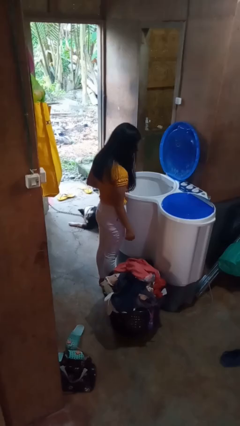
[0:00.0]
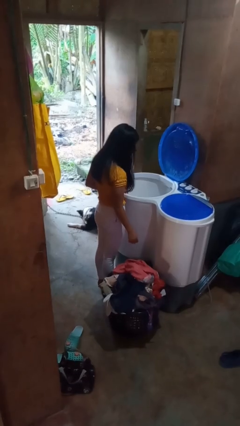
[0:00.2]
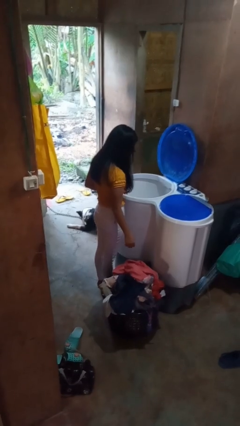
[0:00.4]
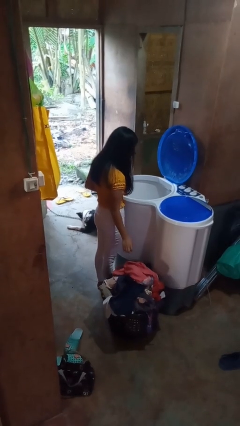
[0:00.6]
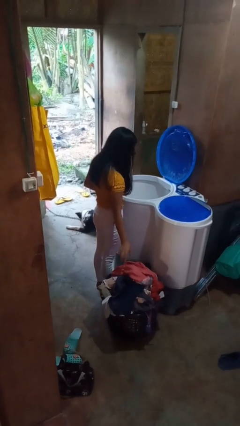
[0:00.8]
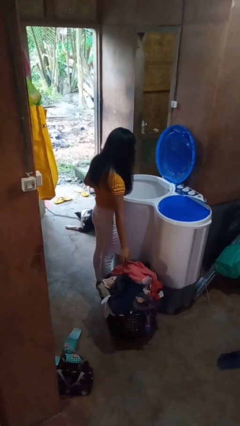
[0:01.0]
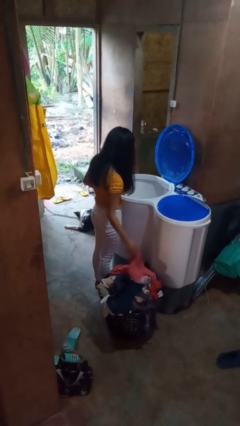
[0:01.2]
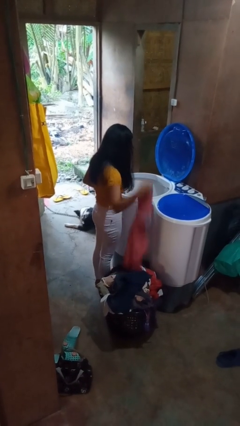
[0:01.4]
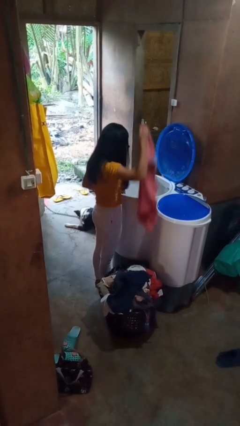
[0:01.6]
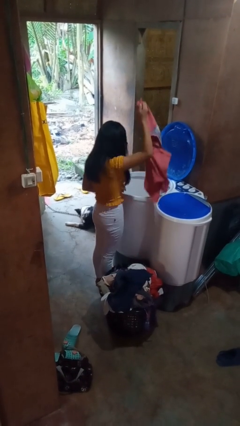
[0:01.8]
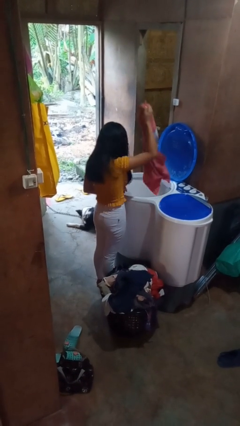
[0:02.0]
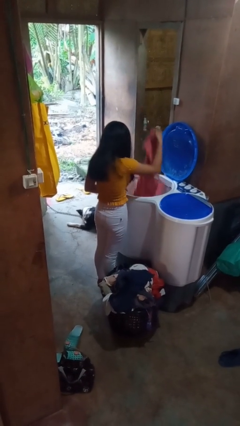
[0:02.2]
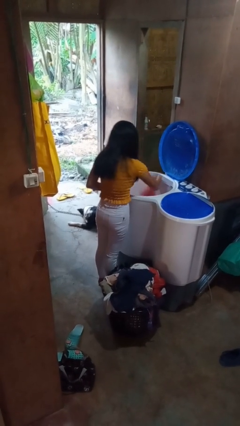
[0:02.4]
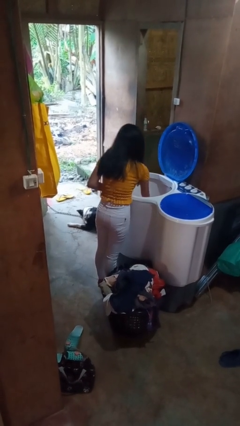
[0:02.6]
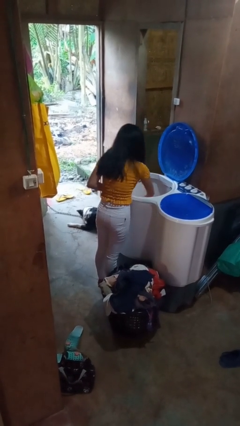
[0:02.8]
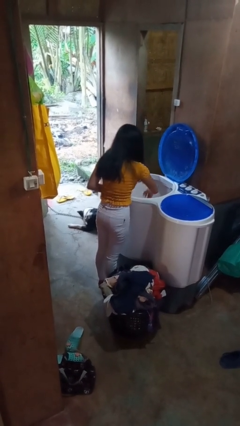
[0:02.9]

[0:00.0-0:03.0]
person loads clotheswasher

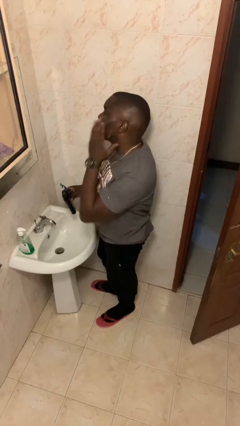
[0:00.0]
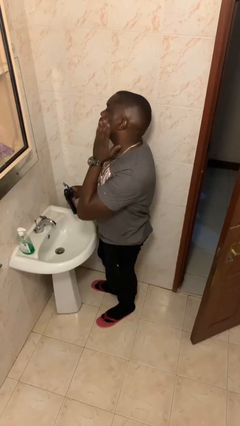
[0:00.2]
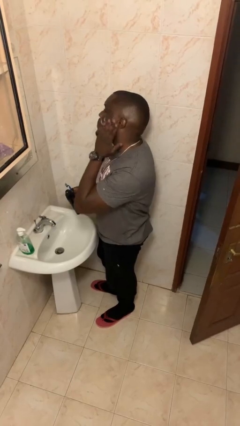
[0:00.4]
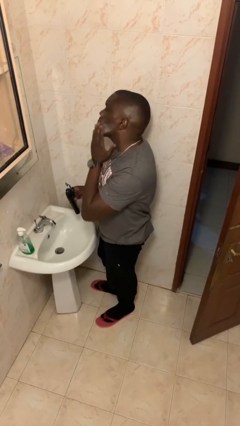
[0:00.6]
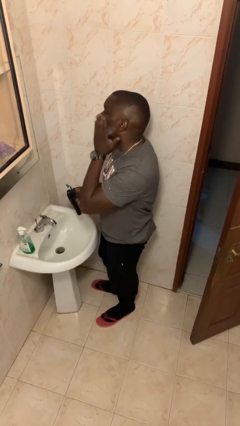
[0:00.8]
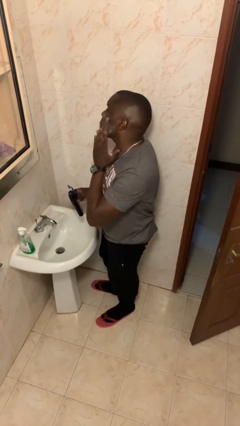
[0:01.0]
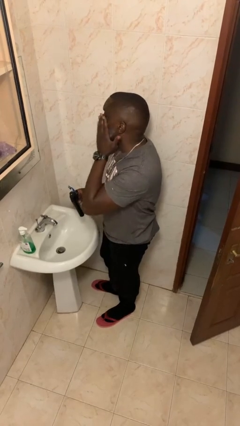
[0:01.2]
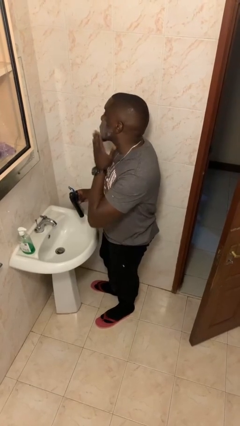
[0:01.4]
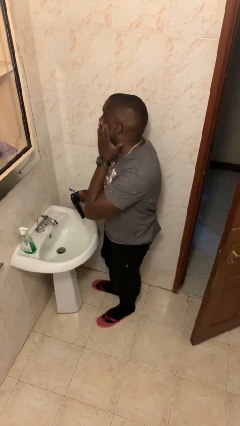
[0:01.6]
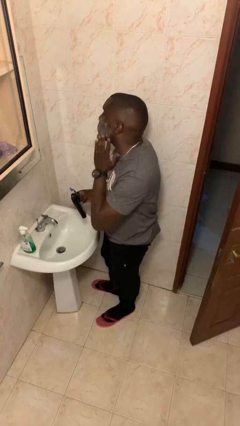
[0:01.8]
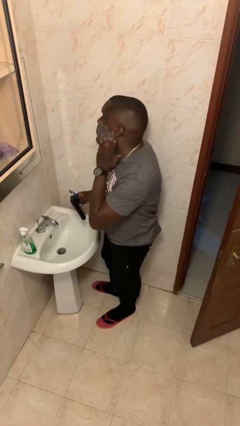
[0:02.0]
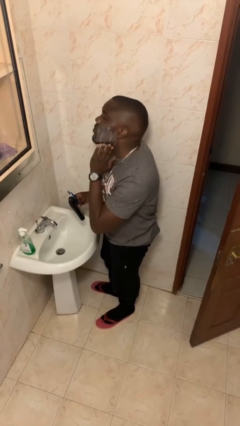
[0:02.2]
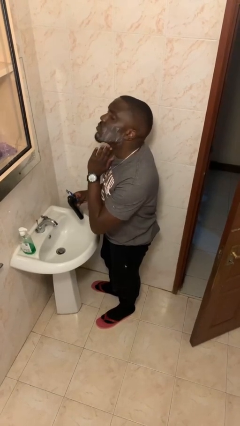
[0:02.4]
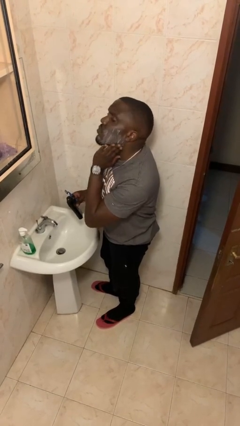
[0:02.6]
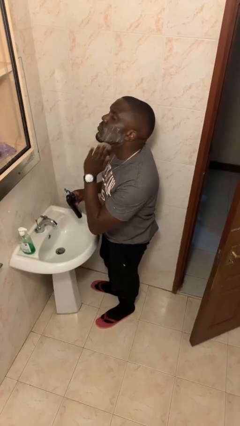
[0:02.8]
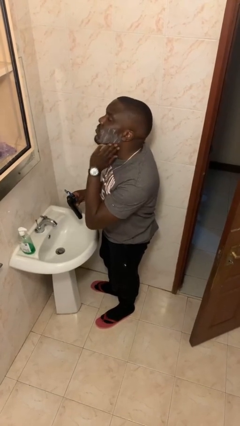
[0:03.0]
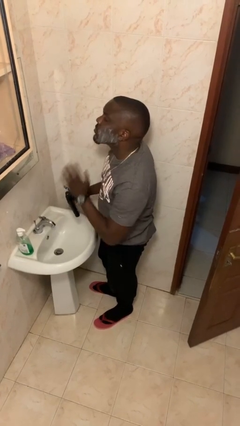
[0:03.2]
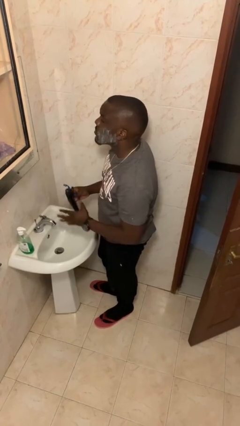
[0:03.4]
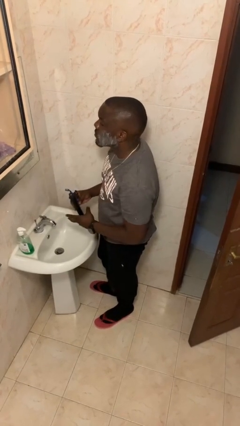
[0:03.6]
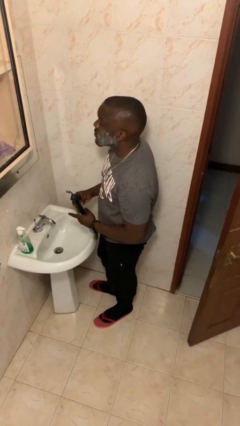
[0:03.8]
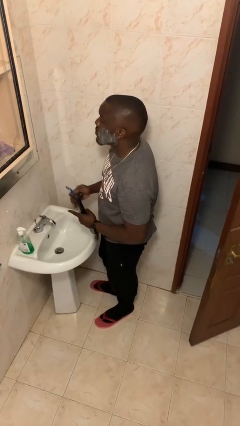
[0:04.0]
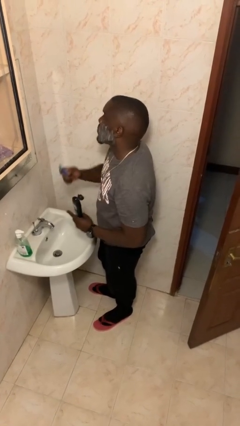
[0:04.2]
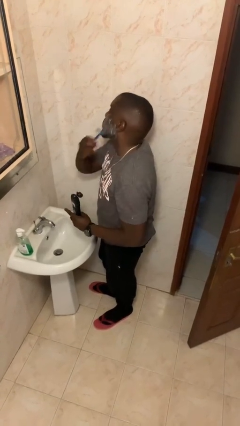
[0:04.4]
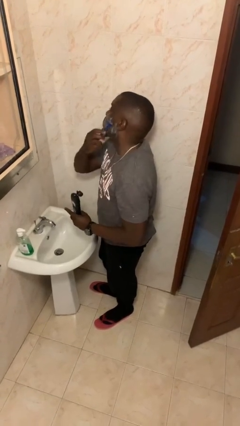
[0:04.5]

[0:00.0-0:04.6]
person applies shaving cream

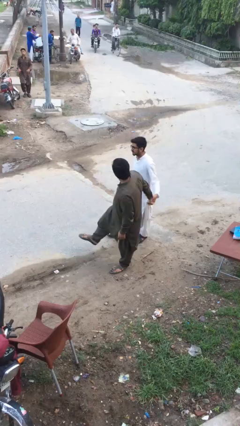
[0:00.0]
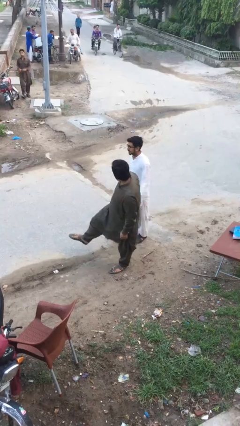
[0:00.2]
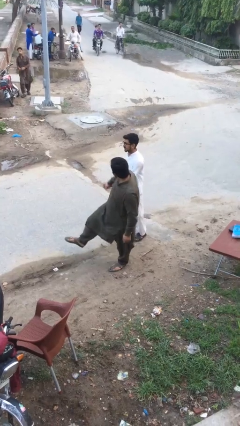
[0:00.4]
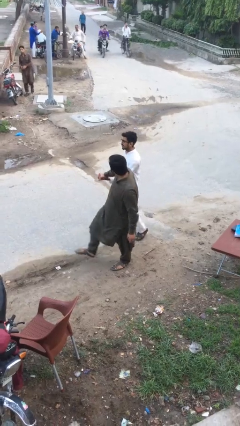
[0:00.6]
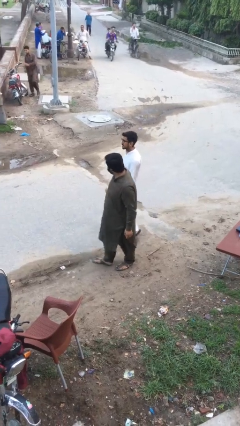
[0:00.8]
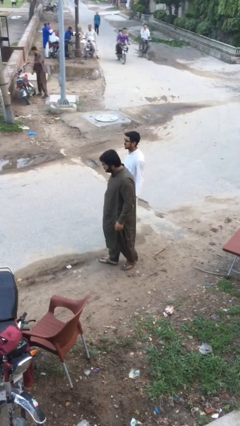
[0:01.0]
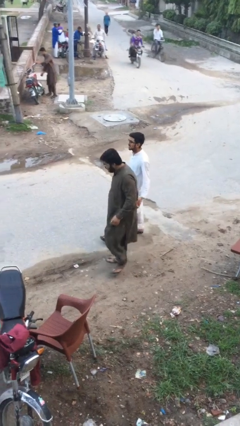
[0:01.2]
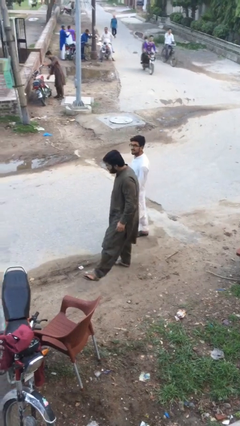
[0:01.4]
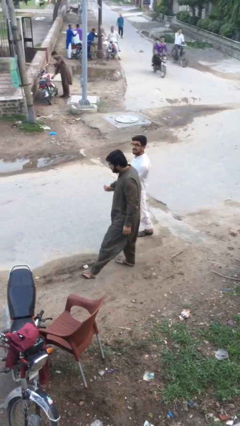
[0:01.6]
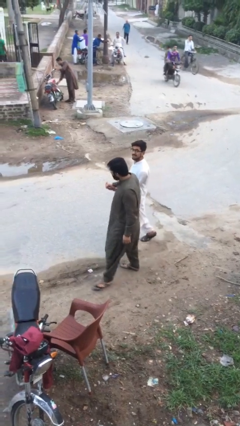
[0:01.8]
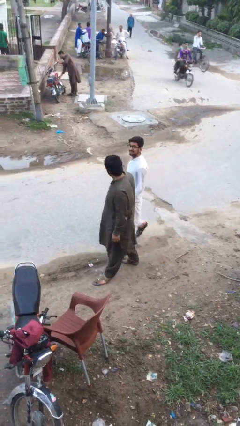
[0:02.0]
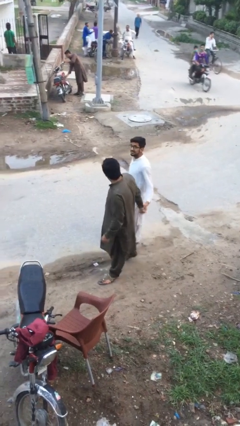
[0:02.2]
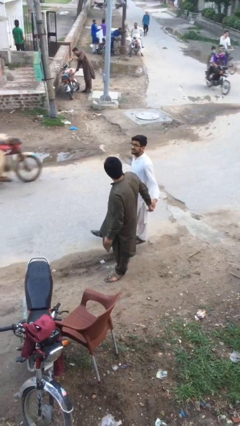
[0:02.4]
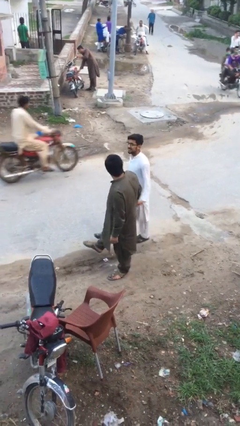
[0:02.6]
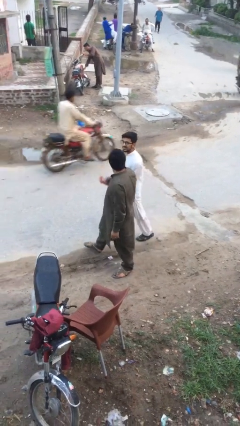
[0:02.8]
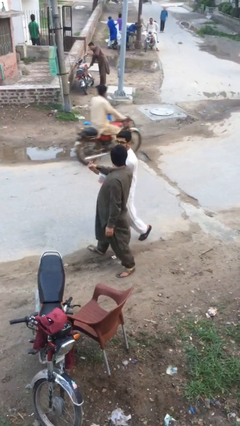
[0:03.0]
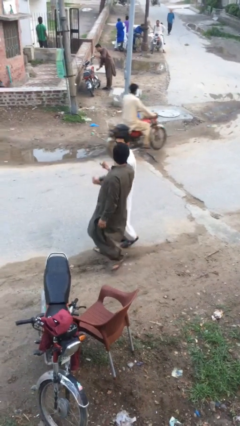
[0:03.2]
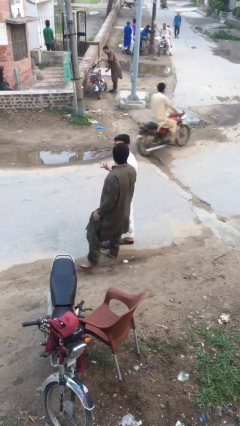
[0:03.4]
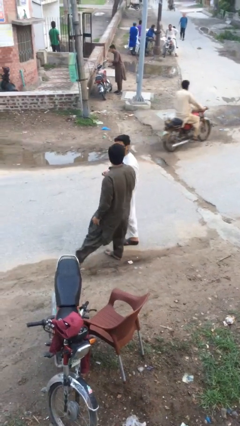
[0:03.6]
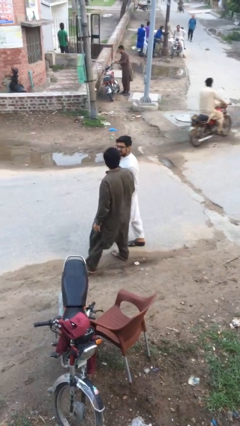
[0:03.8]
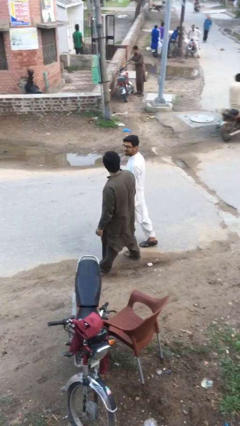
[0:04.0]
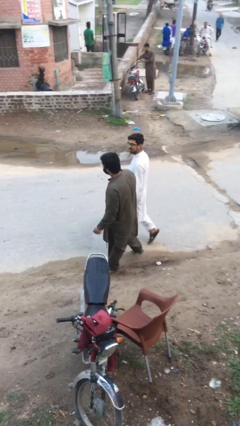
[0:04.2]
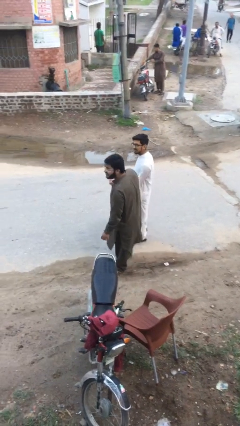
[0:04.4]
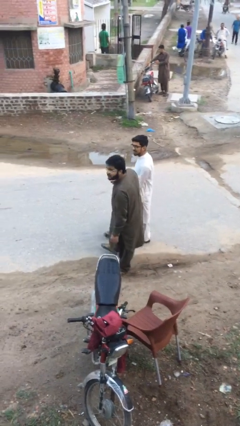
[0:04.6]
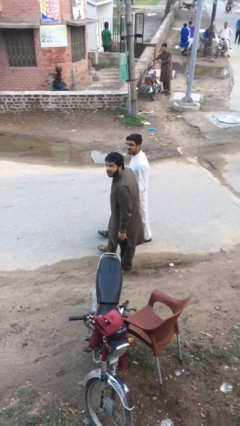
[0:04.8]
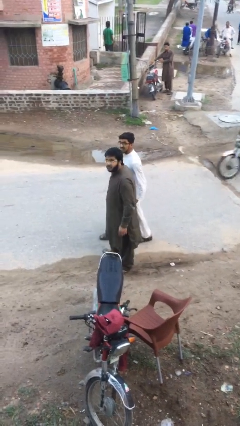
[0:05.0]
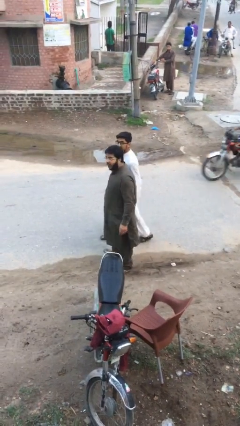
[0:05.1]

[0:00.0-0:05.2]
person holds hand

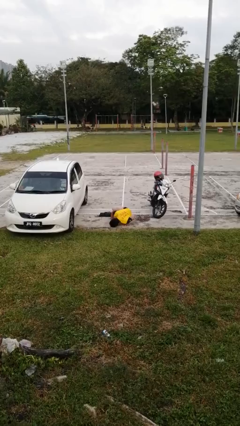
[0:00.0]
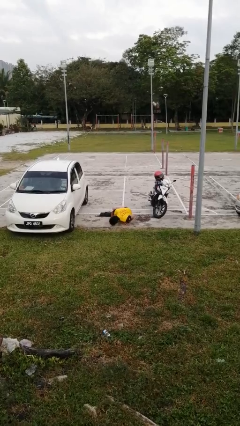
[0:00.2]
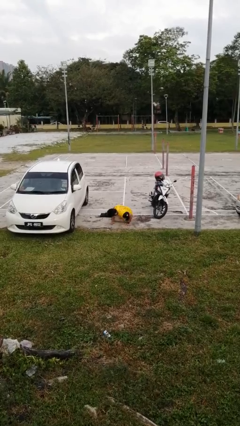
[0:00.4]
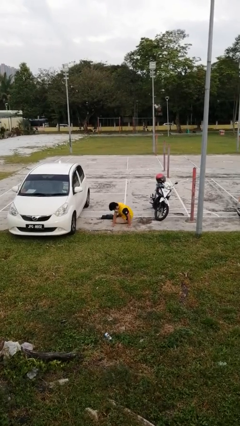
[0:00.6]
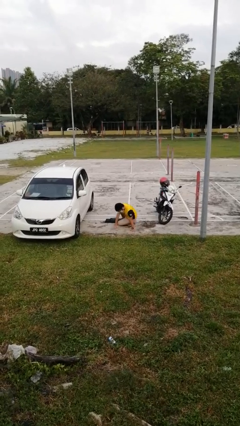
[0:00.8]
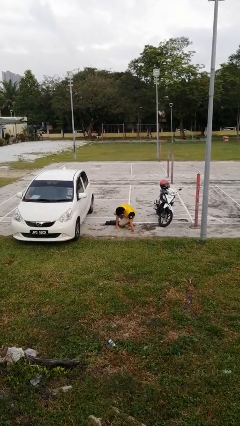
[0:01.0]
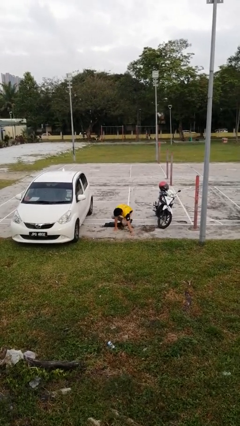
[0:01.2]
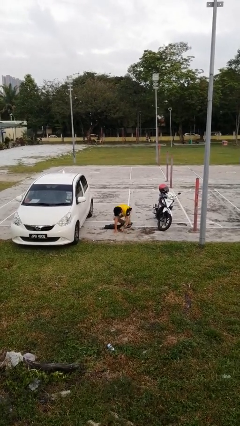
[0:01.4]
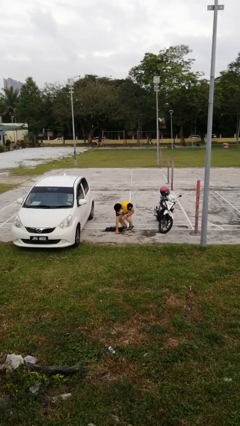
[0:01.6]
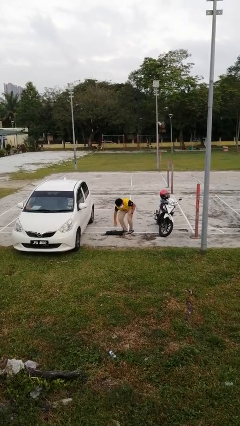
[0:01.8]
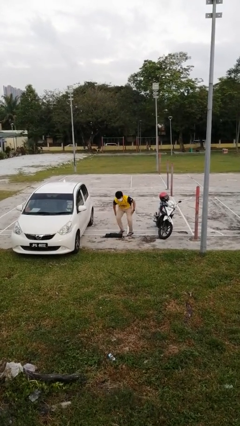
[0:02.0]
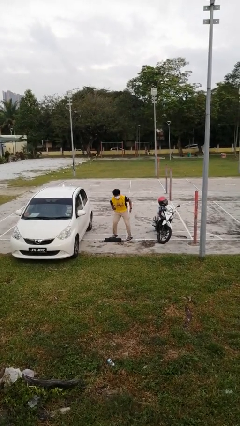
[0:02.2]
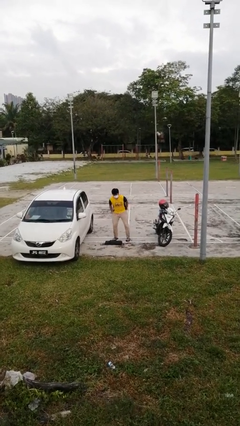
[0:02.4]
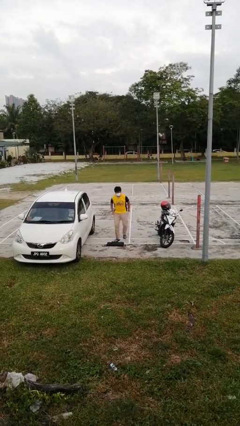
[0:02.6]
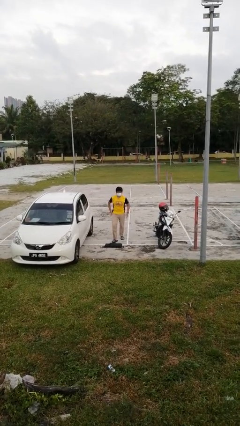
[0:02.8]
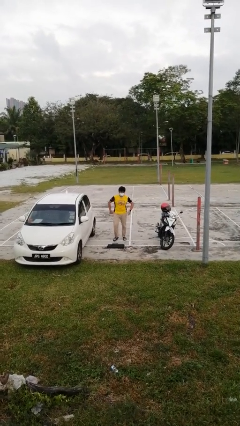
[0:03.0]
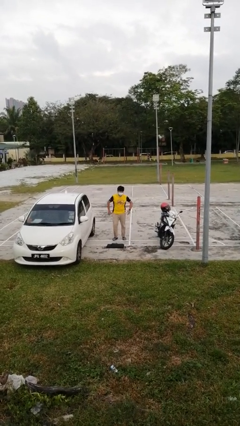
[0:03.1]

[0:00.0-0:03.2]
person stands up from floor

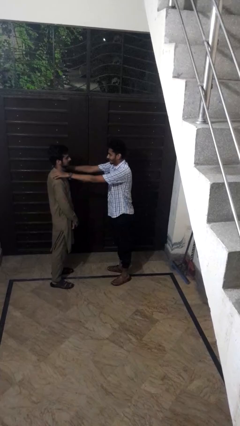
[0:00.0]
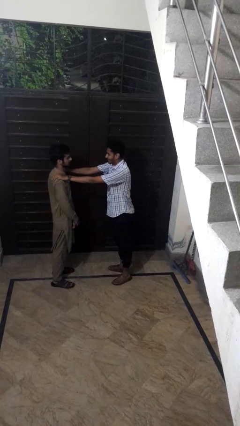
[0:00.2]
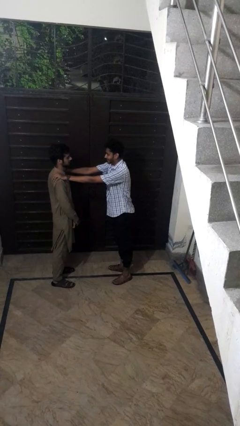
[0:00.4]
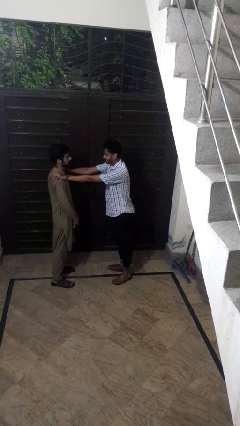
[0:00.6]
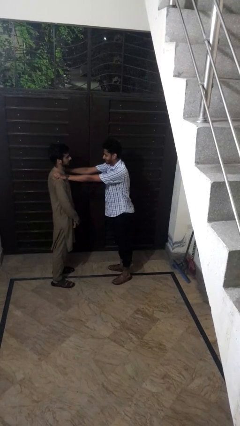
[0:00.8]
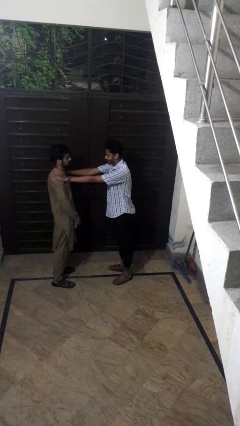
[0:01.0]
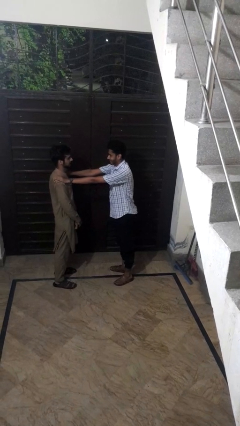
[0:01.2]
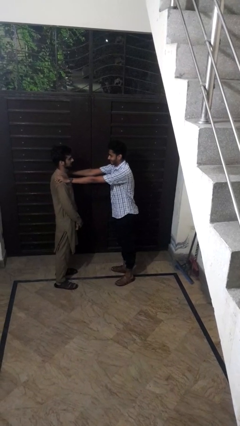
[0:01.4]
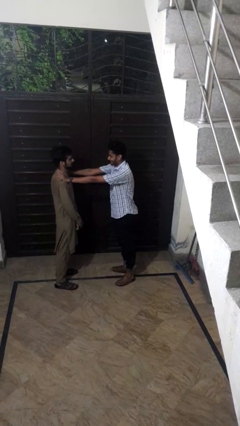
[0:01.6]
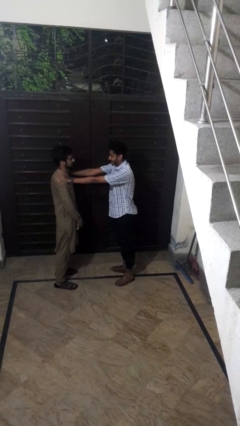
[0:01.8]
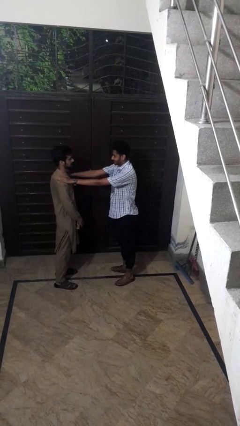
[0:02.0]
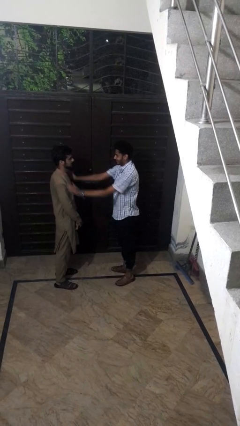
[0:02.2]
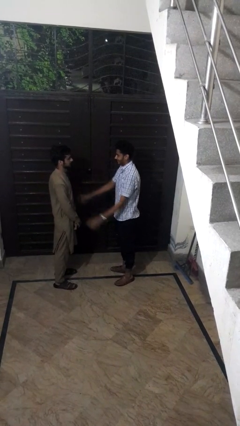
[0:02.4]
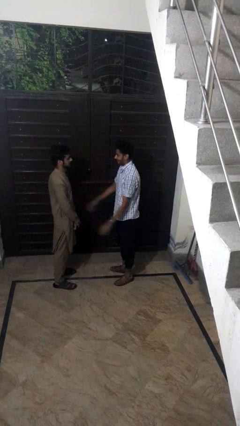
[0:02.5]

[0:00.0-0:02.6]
person pounds shoulders of person
